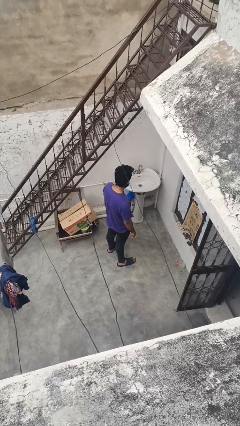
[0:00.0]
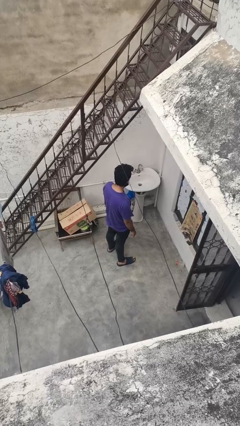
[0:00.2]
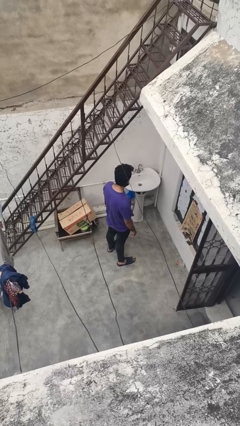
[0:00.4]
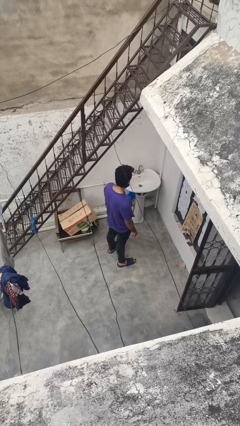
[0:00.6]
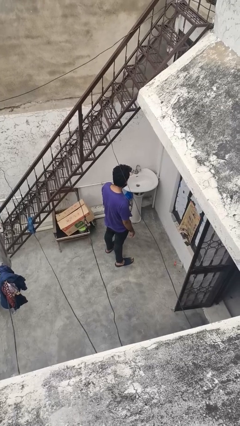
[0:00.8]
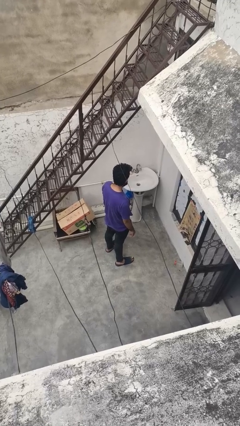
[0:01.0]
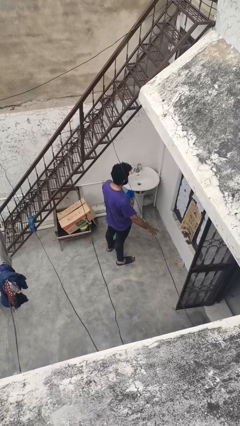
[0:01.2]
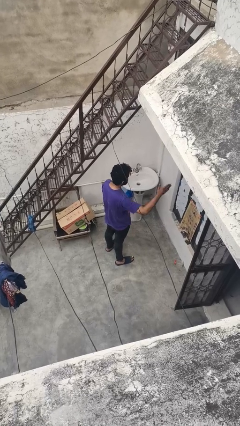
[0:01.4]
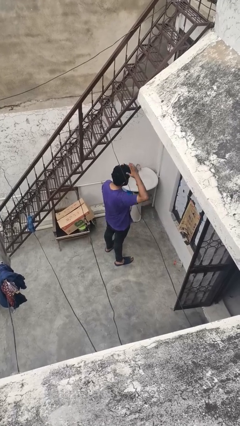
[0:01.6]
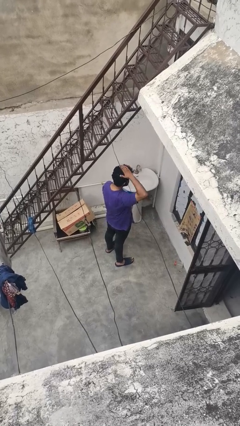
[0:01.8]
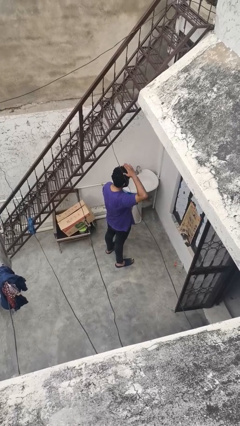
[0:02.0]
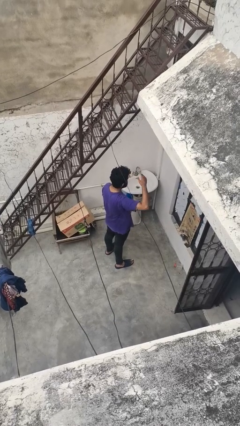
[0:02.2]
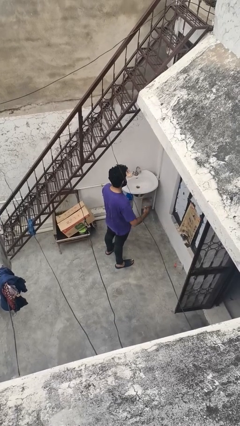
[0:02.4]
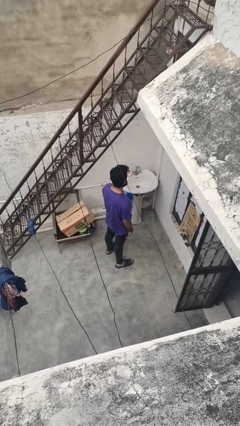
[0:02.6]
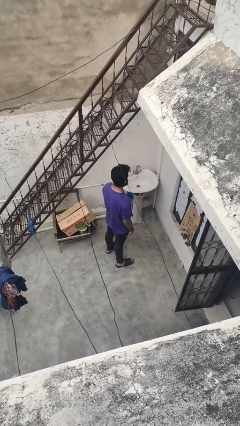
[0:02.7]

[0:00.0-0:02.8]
person pats head

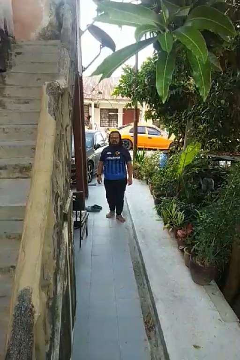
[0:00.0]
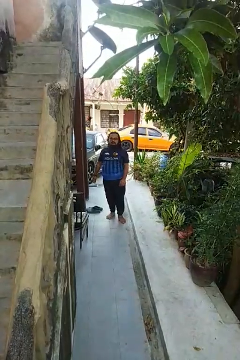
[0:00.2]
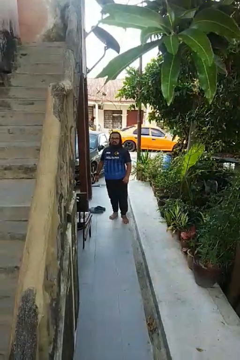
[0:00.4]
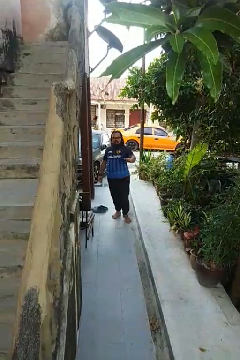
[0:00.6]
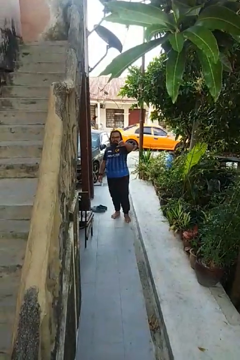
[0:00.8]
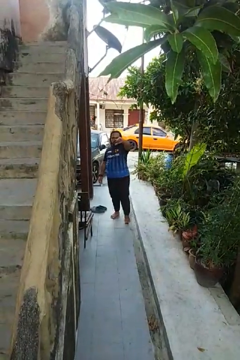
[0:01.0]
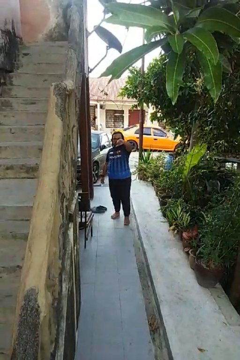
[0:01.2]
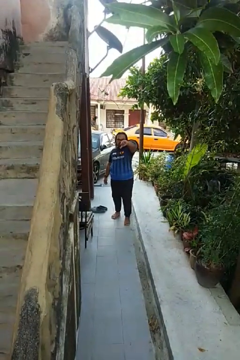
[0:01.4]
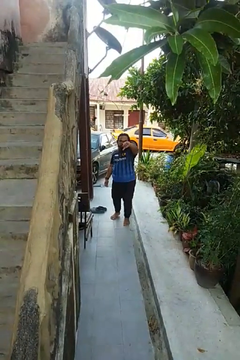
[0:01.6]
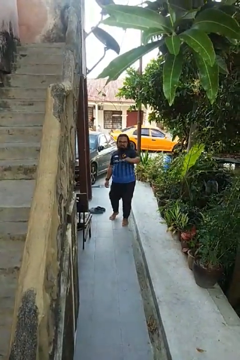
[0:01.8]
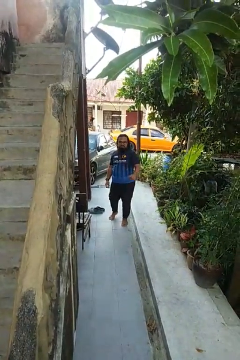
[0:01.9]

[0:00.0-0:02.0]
person gestures thumbs down

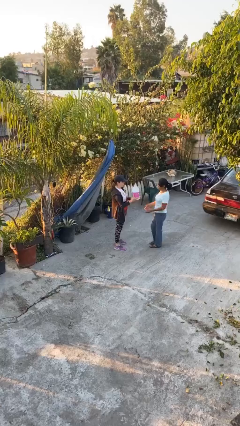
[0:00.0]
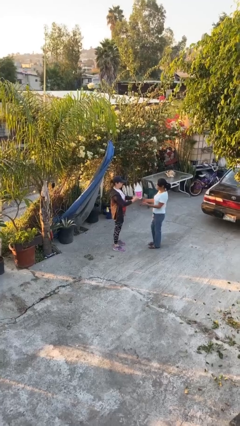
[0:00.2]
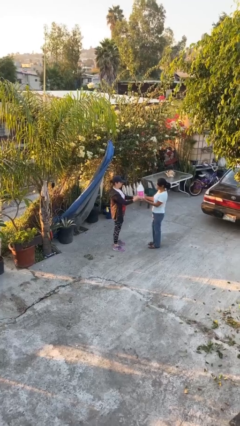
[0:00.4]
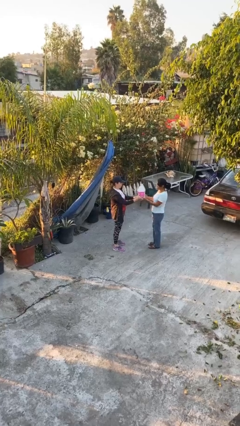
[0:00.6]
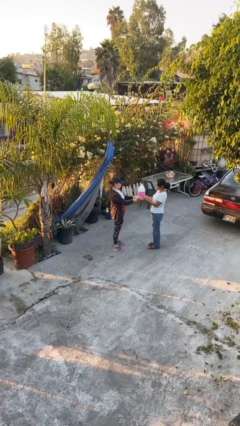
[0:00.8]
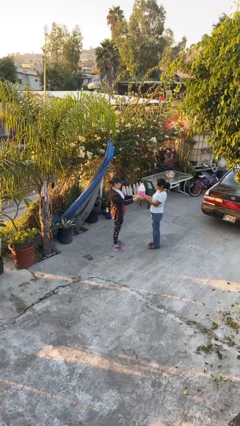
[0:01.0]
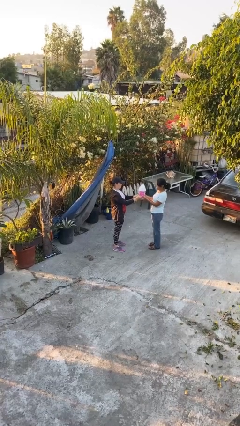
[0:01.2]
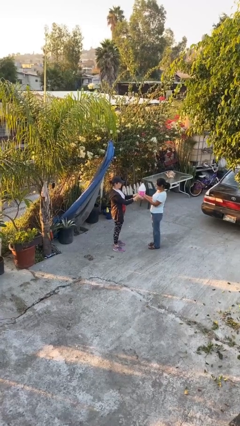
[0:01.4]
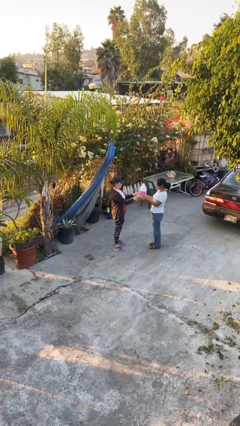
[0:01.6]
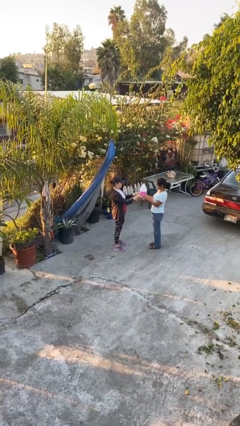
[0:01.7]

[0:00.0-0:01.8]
person transfers object to person

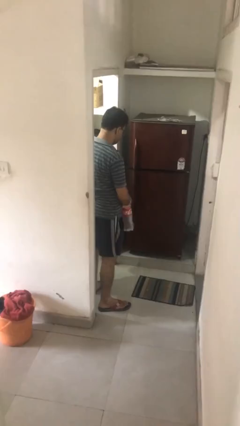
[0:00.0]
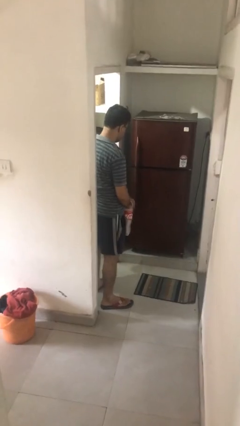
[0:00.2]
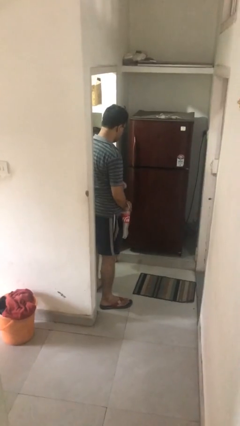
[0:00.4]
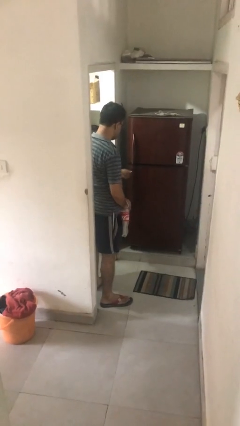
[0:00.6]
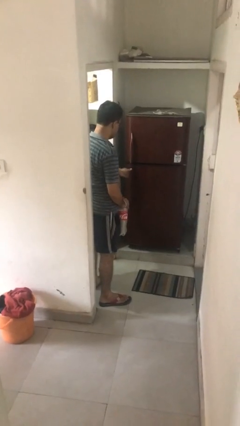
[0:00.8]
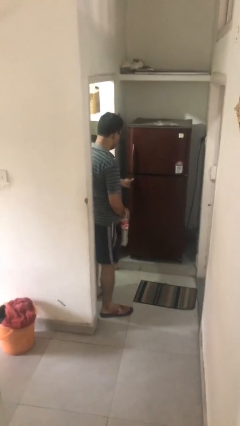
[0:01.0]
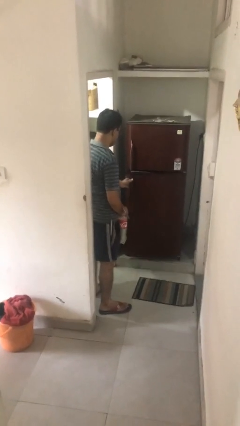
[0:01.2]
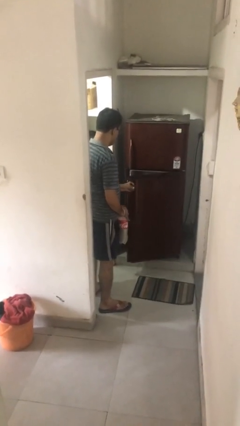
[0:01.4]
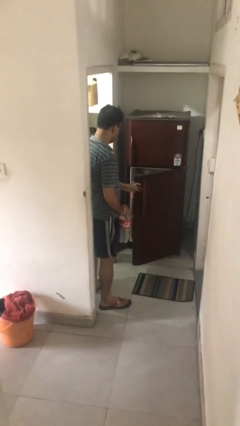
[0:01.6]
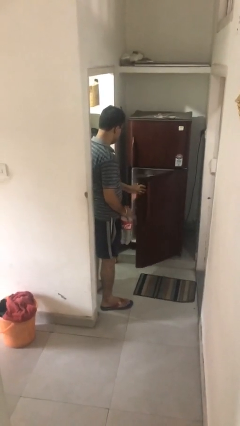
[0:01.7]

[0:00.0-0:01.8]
person opens refrigerator

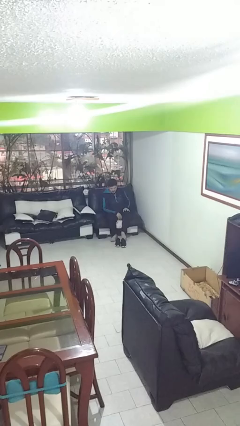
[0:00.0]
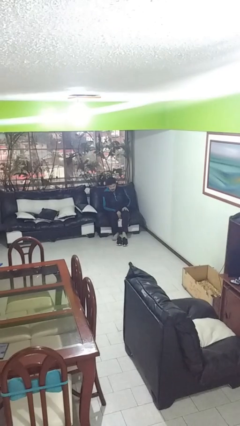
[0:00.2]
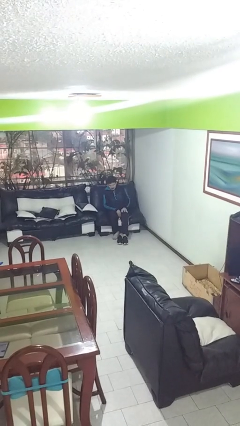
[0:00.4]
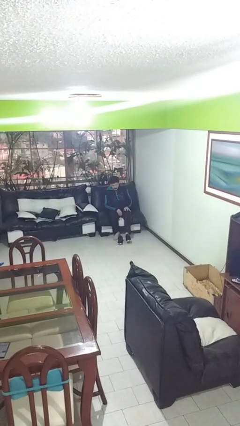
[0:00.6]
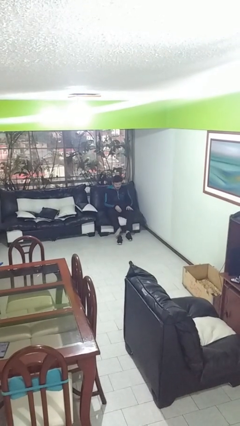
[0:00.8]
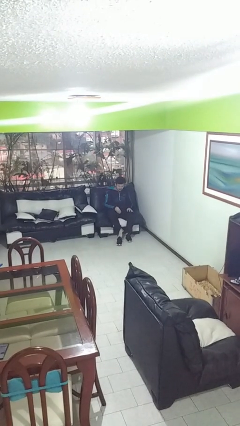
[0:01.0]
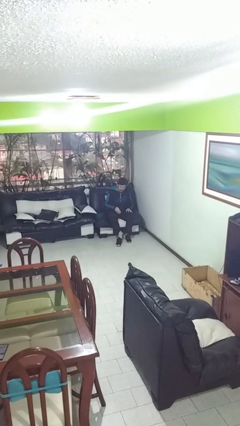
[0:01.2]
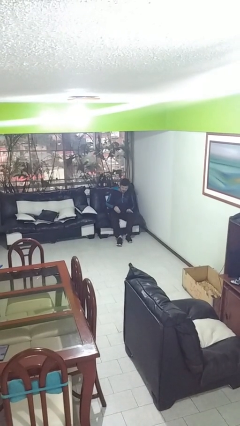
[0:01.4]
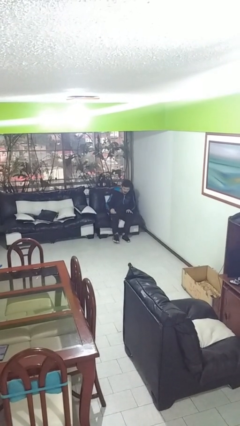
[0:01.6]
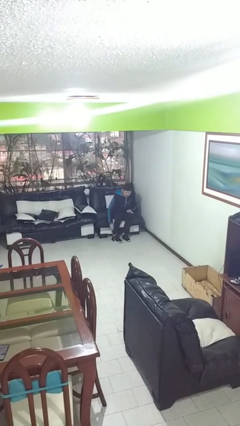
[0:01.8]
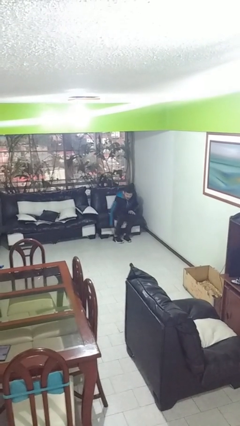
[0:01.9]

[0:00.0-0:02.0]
person puts on shoes

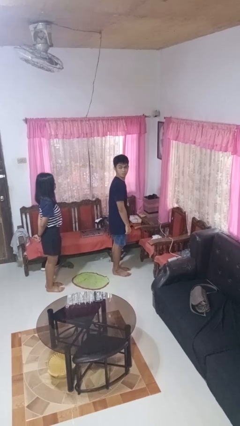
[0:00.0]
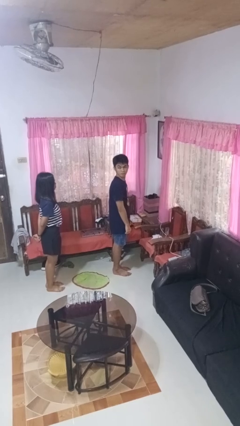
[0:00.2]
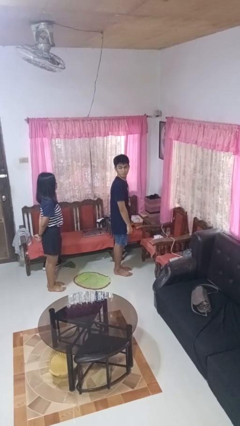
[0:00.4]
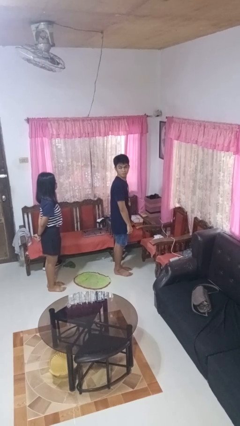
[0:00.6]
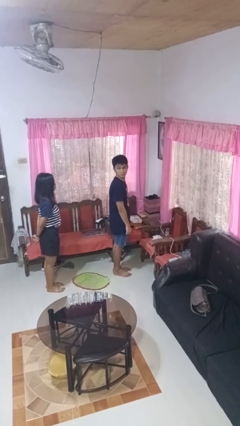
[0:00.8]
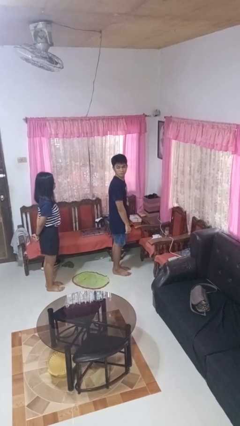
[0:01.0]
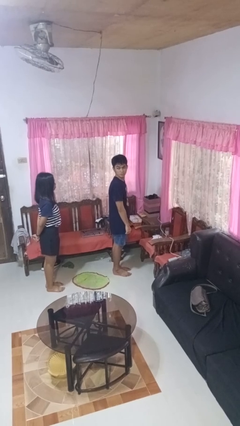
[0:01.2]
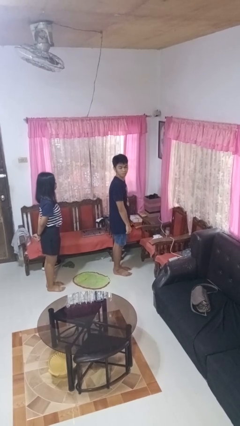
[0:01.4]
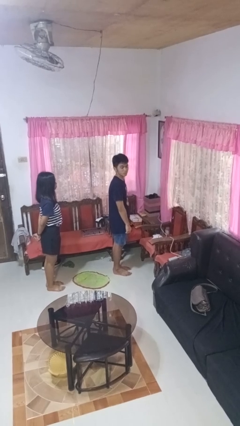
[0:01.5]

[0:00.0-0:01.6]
person looks over shoulder

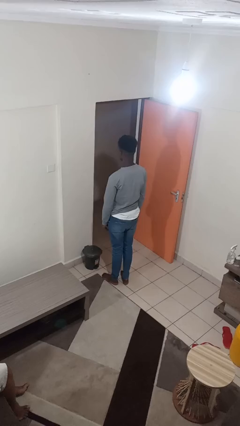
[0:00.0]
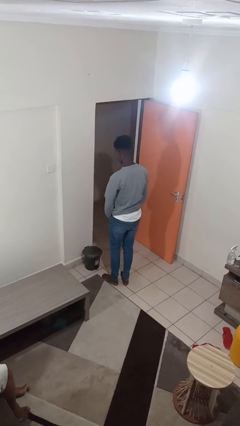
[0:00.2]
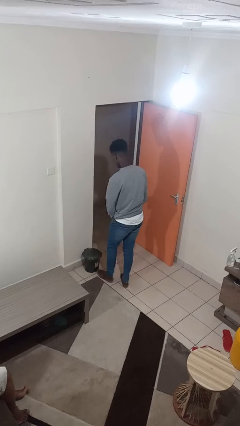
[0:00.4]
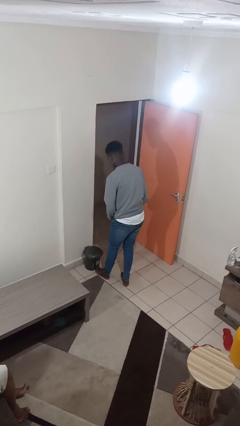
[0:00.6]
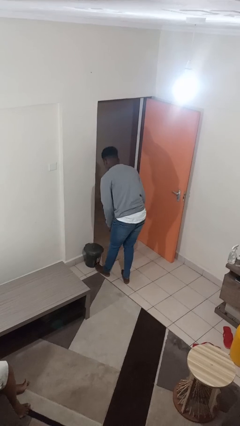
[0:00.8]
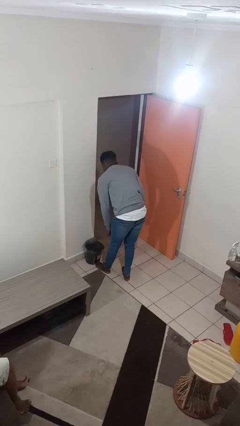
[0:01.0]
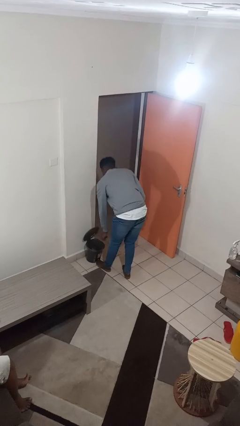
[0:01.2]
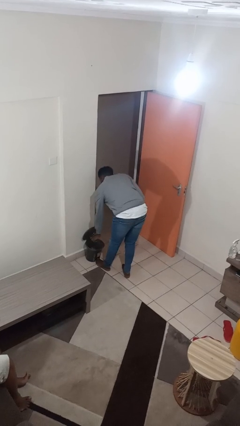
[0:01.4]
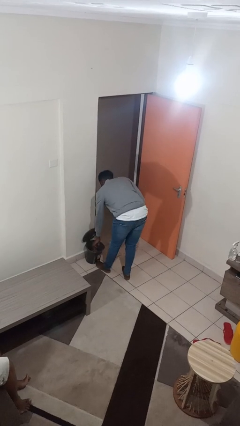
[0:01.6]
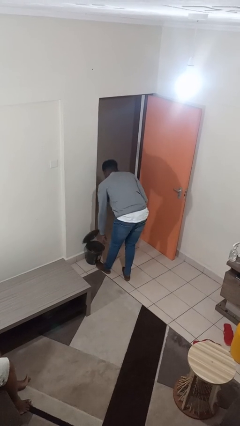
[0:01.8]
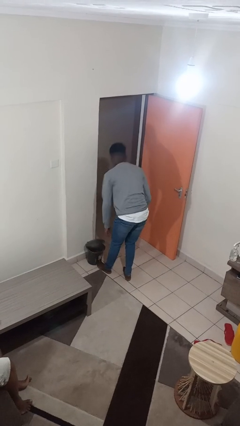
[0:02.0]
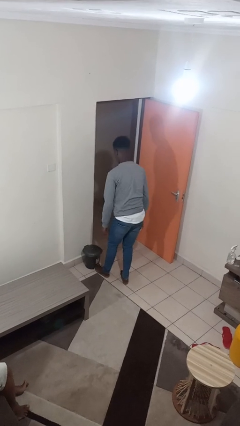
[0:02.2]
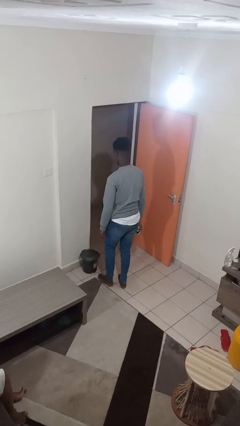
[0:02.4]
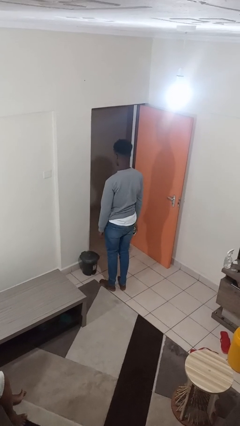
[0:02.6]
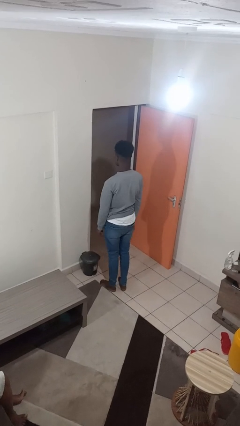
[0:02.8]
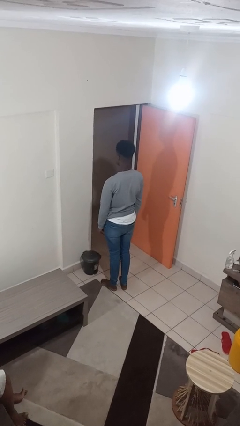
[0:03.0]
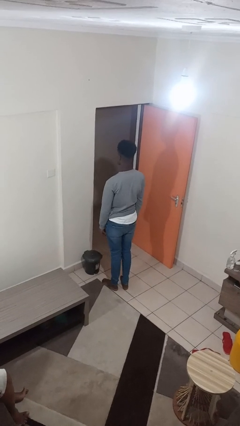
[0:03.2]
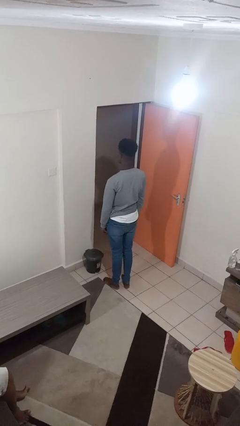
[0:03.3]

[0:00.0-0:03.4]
person discards trash

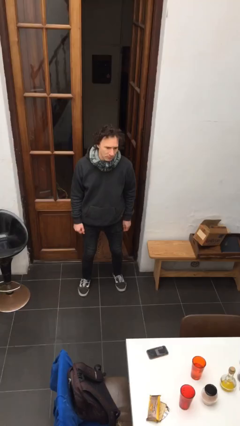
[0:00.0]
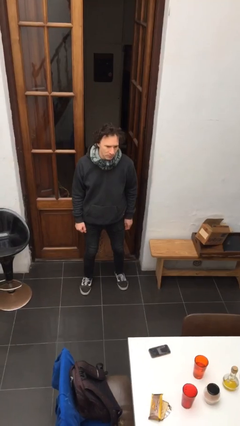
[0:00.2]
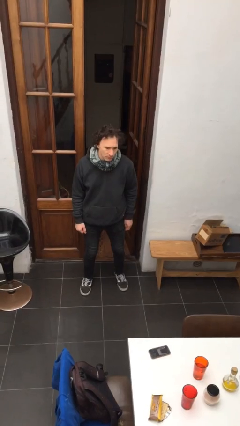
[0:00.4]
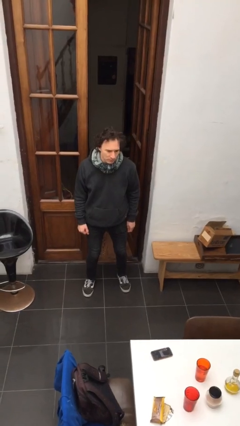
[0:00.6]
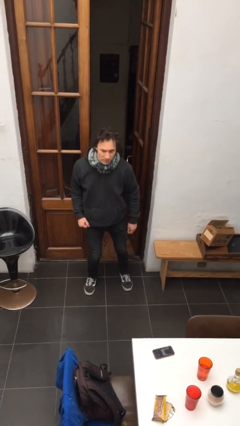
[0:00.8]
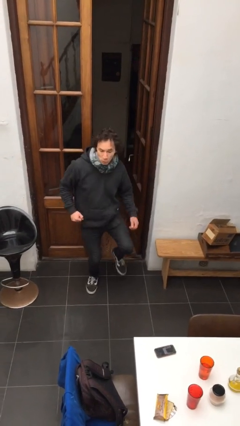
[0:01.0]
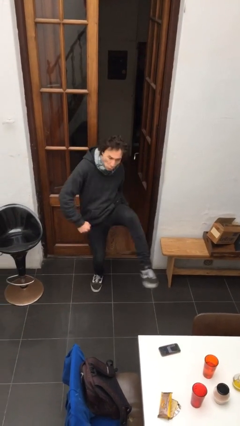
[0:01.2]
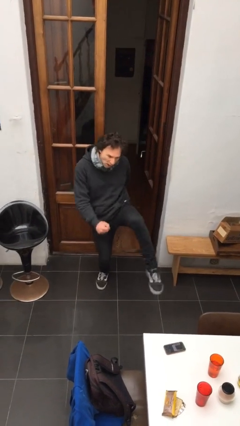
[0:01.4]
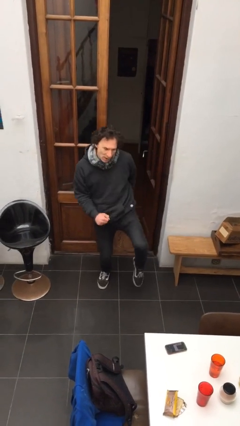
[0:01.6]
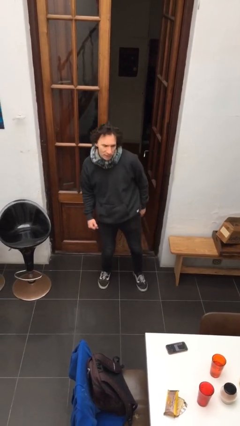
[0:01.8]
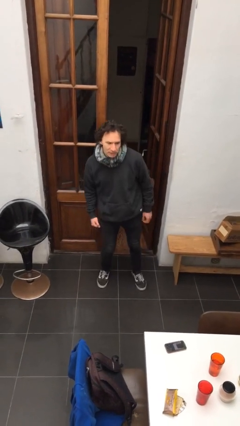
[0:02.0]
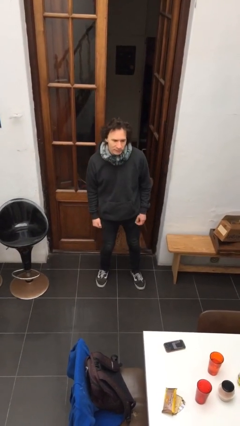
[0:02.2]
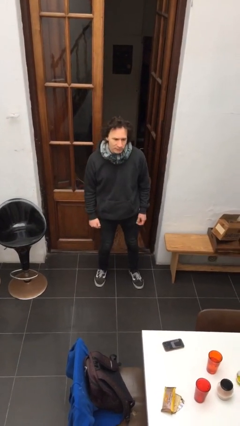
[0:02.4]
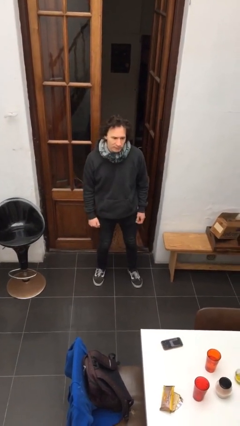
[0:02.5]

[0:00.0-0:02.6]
person karate kicks
